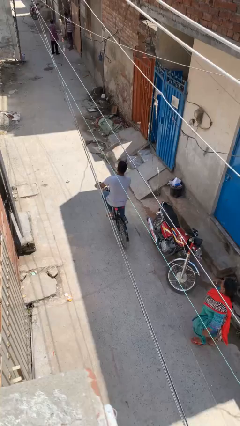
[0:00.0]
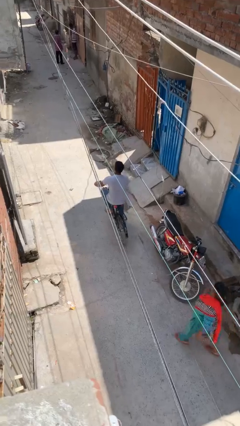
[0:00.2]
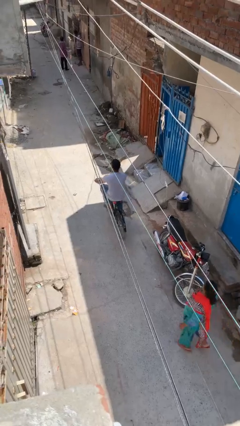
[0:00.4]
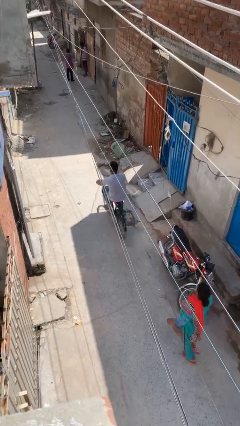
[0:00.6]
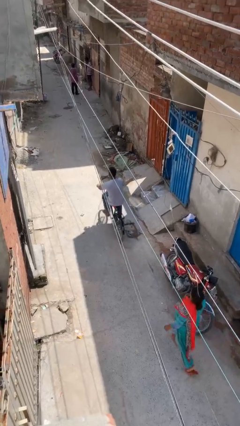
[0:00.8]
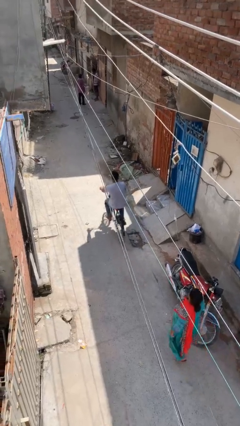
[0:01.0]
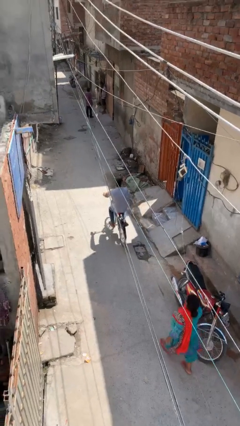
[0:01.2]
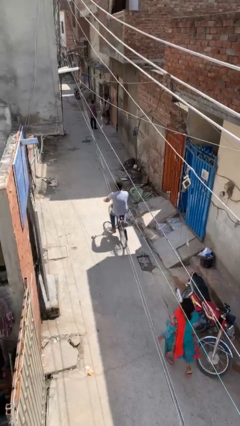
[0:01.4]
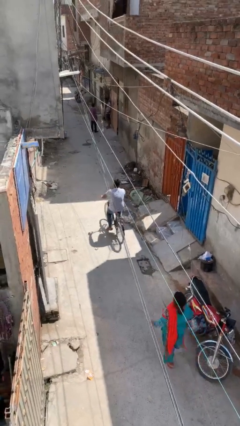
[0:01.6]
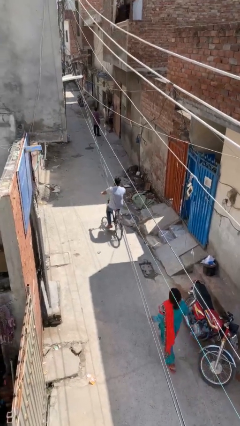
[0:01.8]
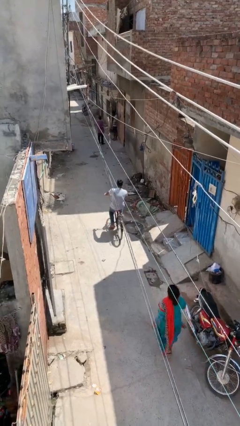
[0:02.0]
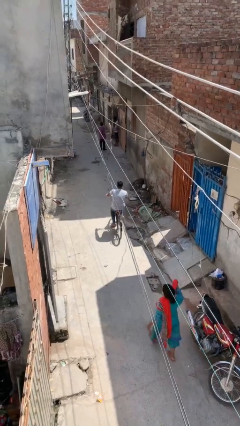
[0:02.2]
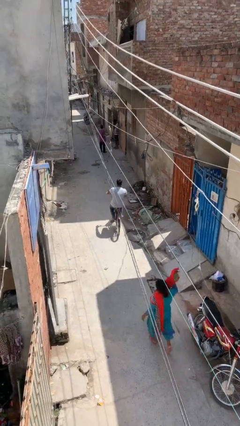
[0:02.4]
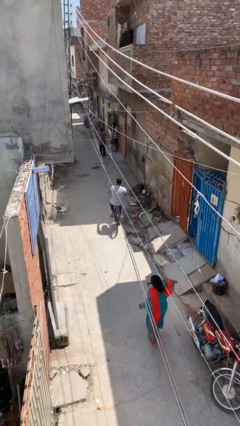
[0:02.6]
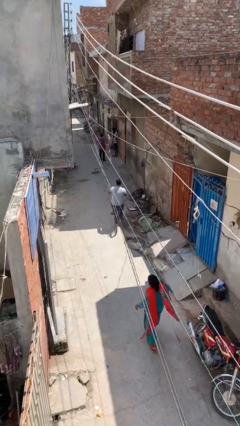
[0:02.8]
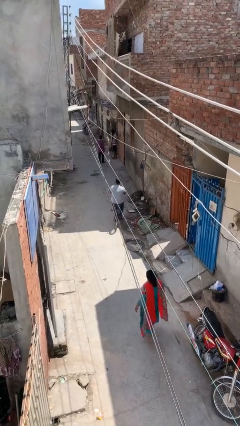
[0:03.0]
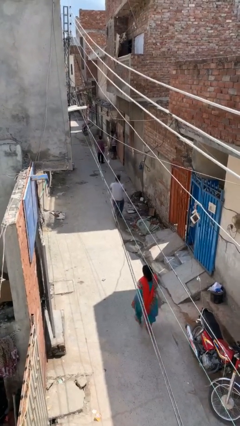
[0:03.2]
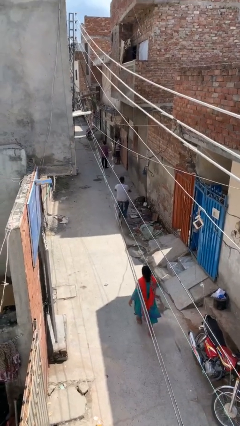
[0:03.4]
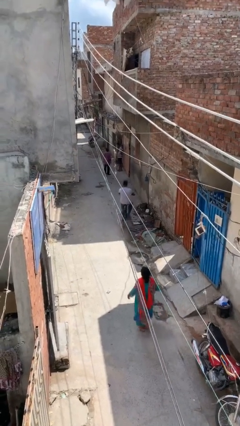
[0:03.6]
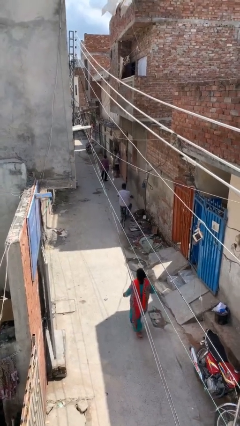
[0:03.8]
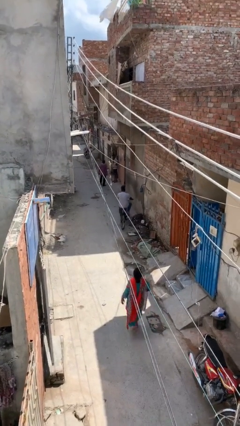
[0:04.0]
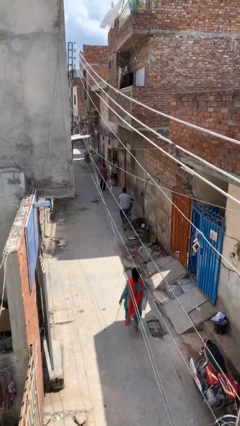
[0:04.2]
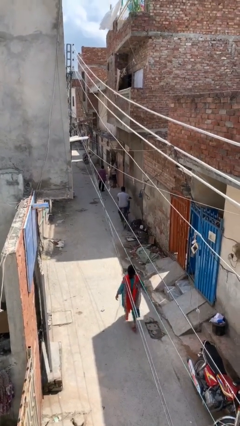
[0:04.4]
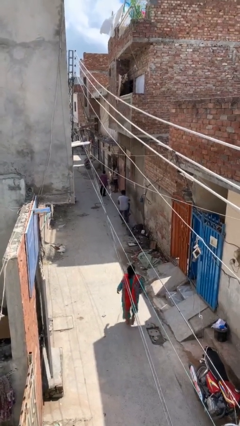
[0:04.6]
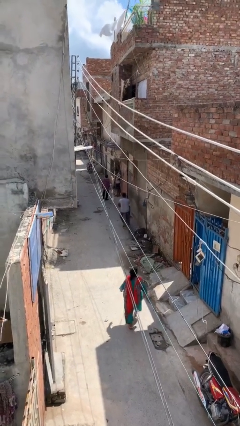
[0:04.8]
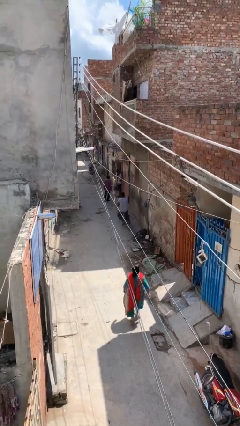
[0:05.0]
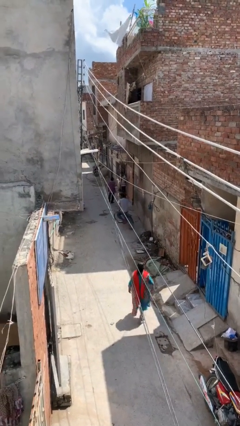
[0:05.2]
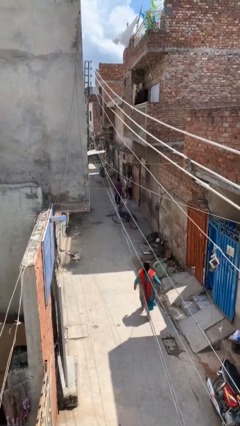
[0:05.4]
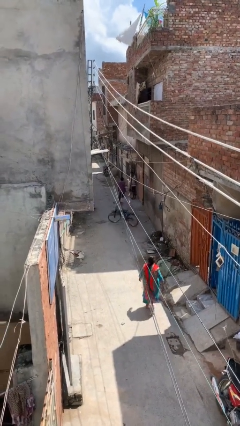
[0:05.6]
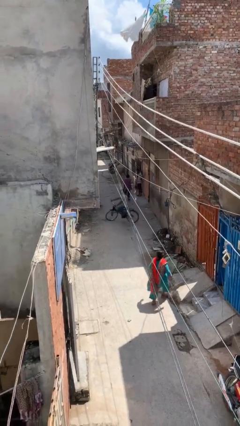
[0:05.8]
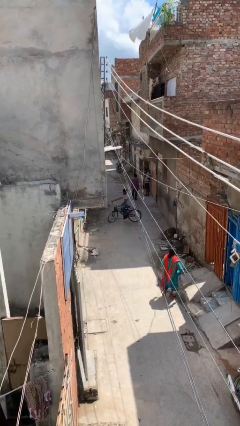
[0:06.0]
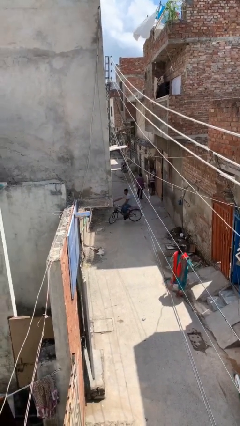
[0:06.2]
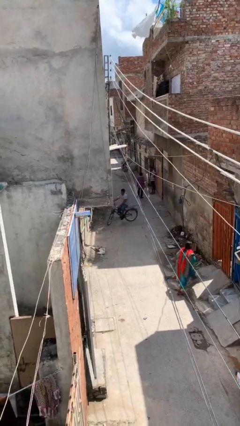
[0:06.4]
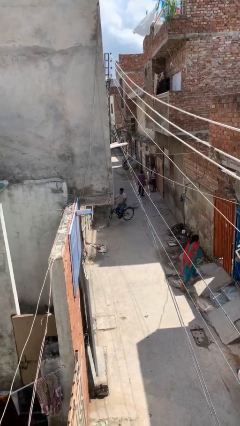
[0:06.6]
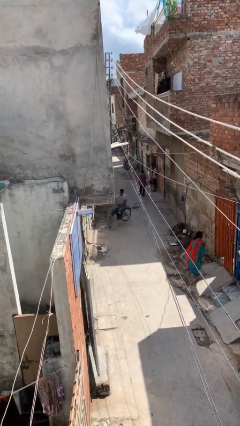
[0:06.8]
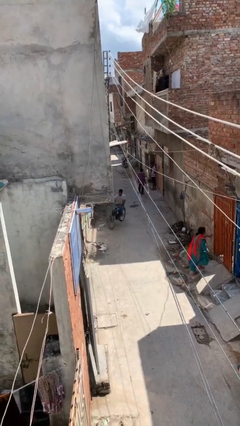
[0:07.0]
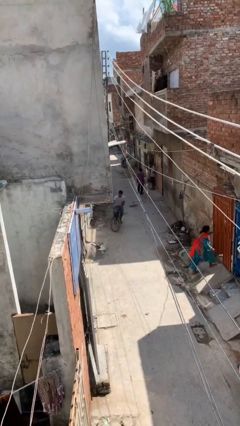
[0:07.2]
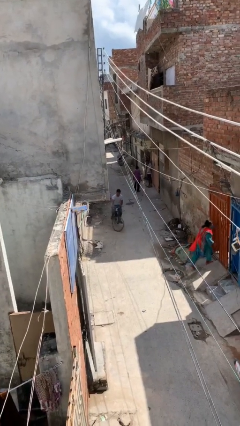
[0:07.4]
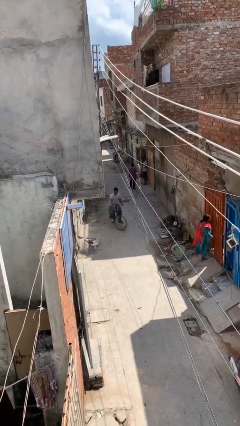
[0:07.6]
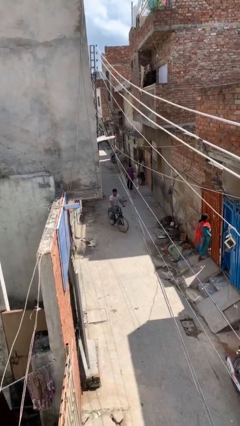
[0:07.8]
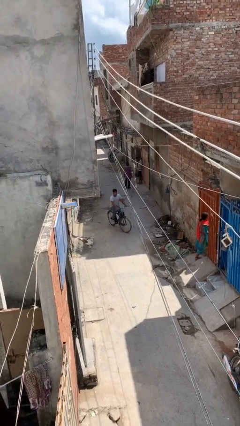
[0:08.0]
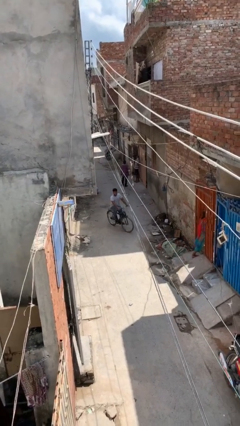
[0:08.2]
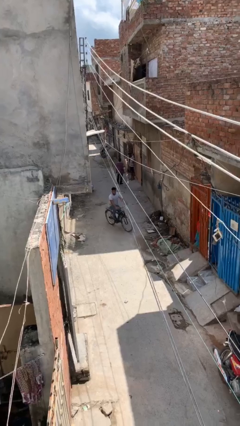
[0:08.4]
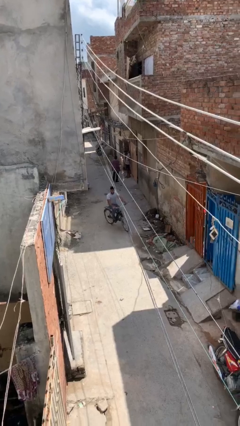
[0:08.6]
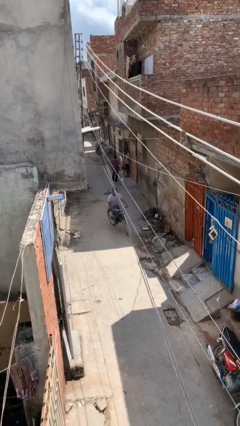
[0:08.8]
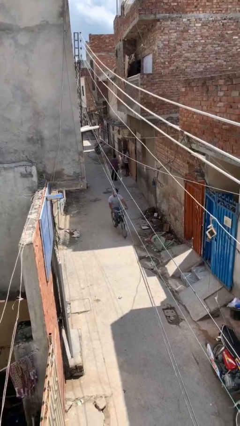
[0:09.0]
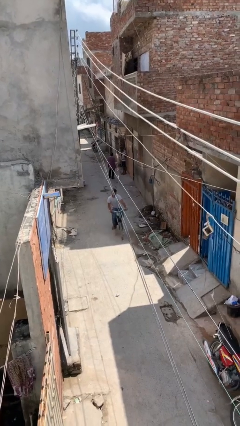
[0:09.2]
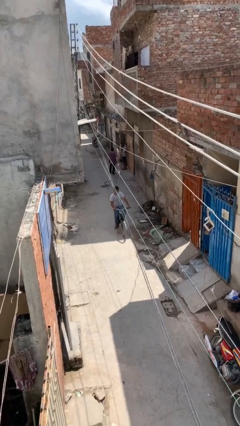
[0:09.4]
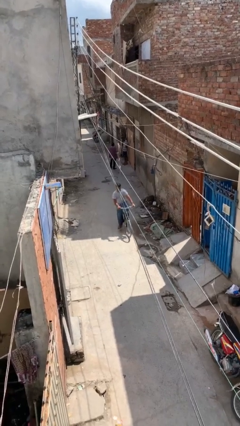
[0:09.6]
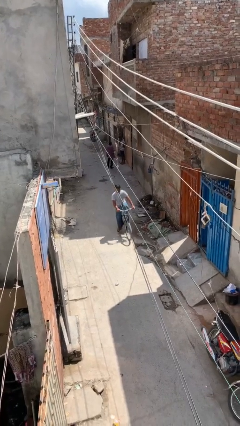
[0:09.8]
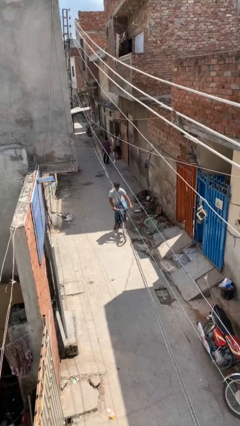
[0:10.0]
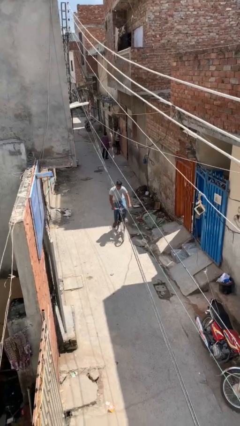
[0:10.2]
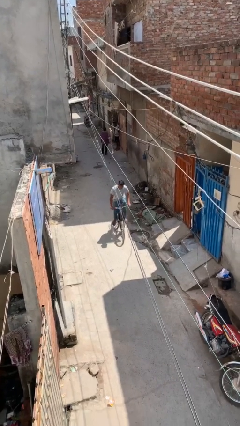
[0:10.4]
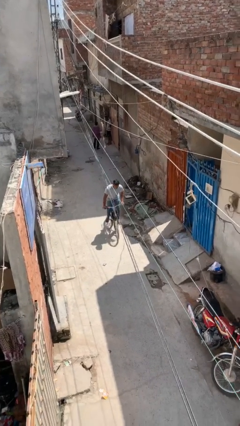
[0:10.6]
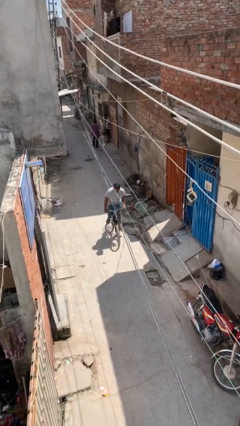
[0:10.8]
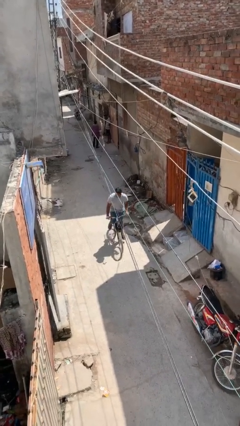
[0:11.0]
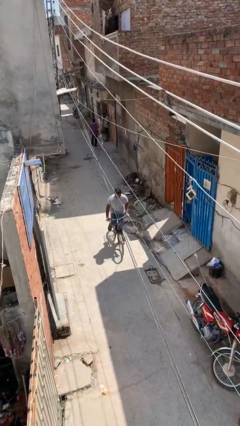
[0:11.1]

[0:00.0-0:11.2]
person rides bicycle

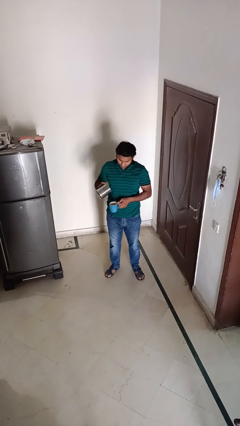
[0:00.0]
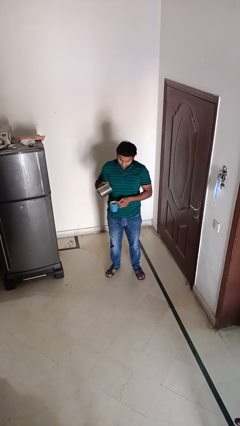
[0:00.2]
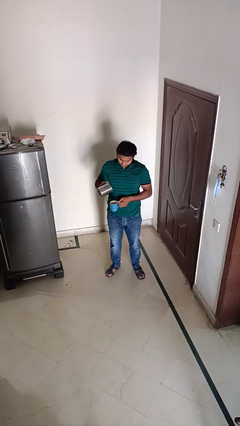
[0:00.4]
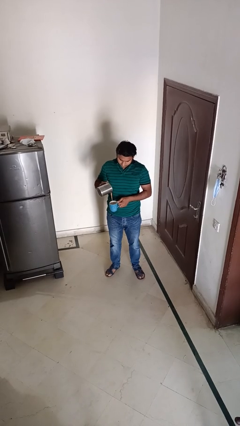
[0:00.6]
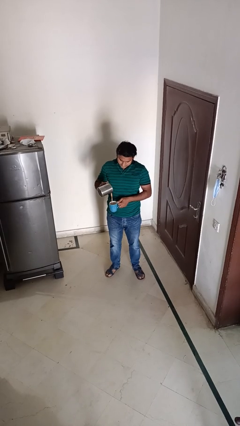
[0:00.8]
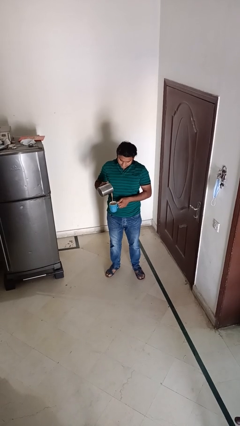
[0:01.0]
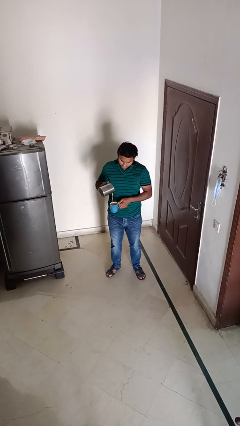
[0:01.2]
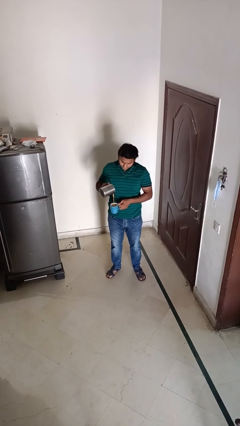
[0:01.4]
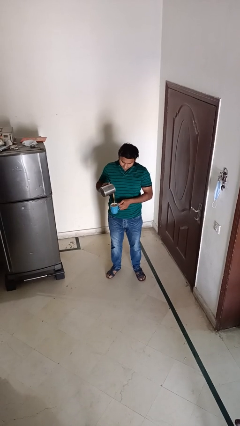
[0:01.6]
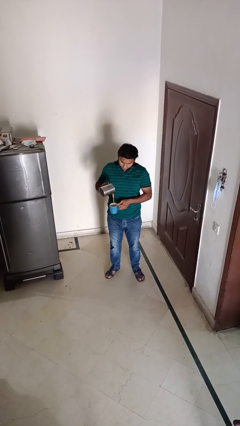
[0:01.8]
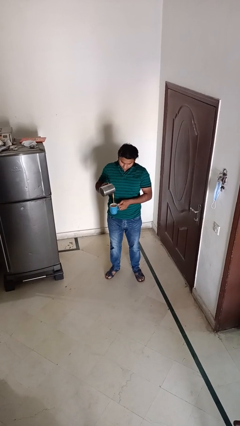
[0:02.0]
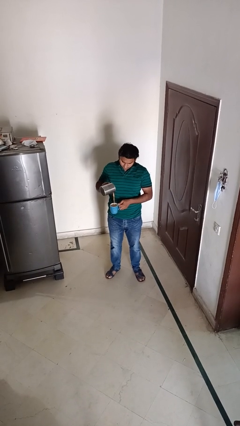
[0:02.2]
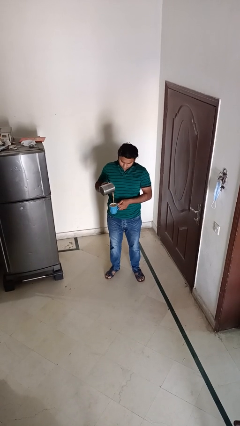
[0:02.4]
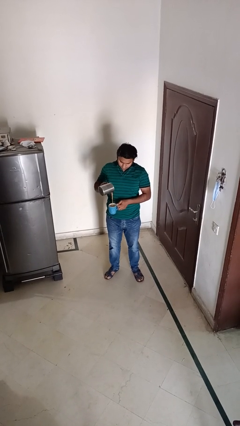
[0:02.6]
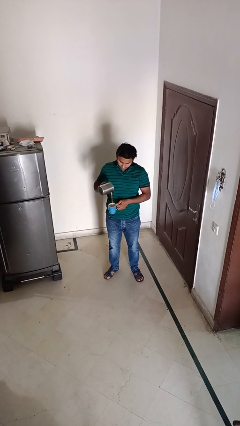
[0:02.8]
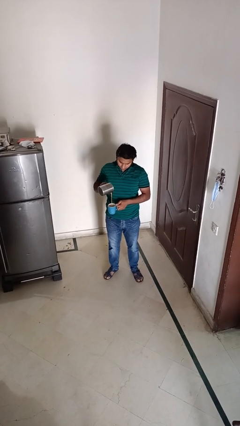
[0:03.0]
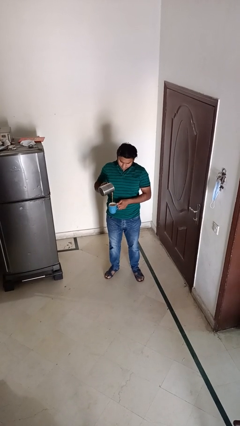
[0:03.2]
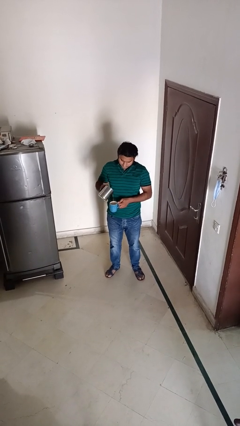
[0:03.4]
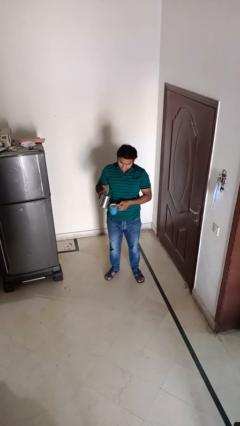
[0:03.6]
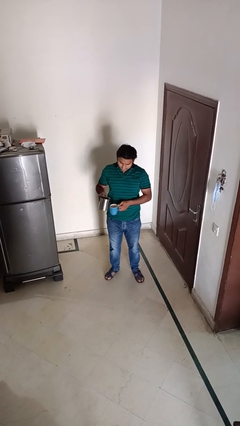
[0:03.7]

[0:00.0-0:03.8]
person pours coffee into mug

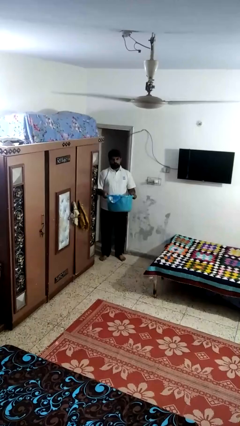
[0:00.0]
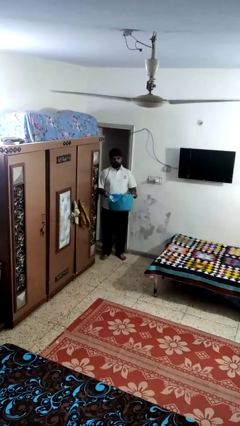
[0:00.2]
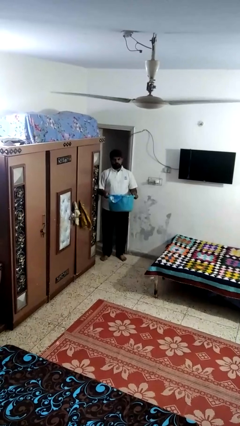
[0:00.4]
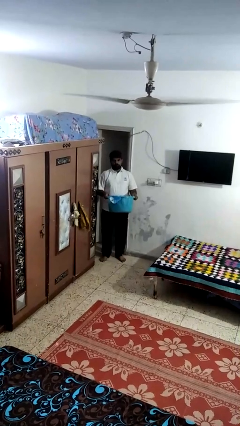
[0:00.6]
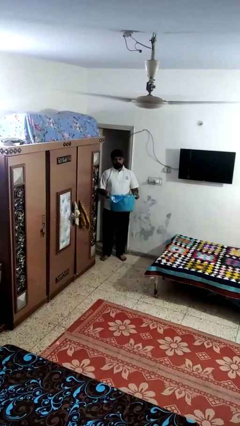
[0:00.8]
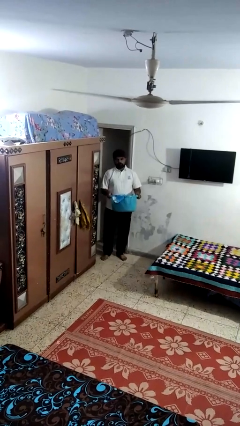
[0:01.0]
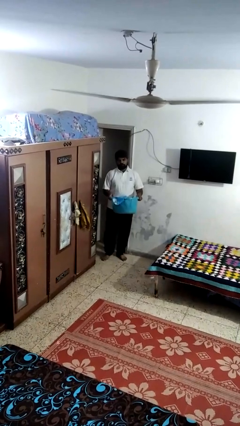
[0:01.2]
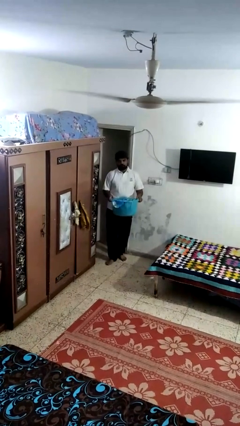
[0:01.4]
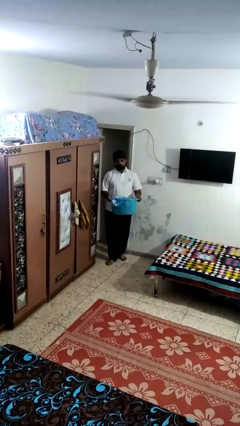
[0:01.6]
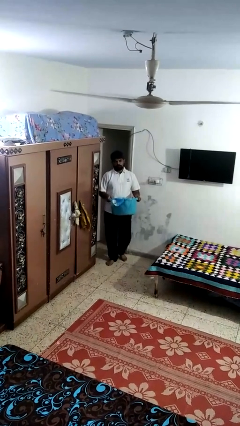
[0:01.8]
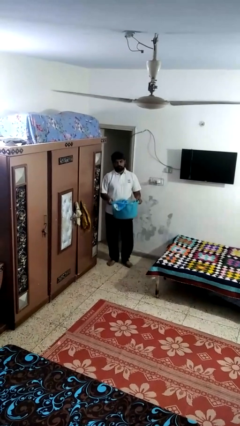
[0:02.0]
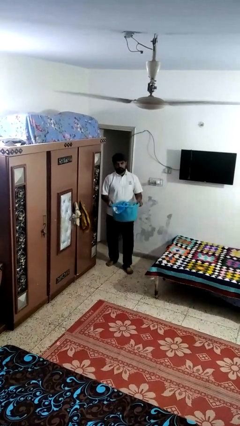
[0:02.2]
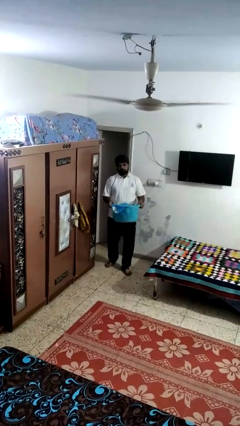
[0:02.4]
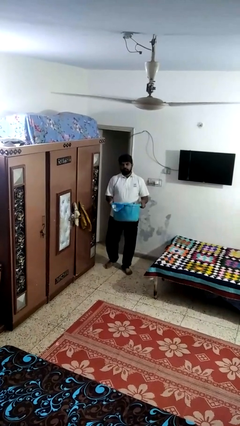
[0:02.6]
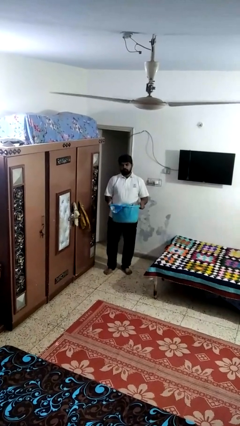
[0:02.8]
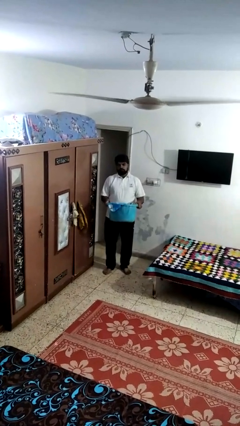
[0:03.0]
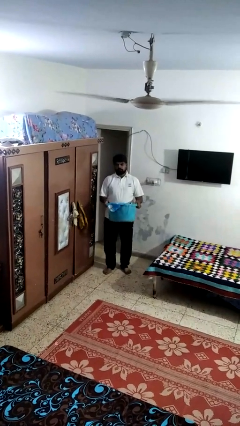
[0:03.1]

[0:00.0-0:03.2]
person carries laundry basket
